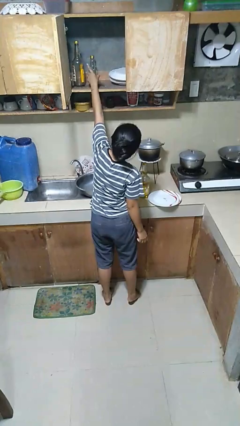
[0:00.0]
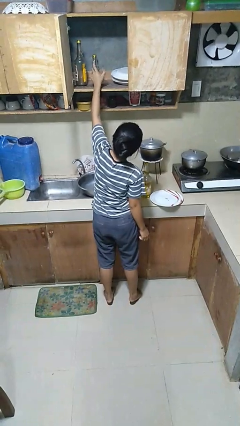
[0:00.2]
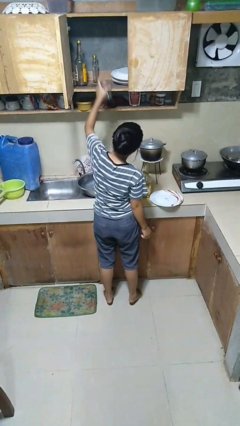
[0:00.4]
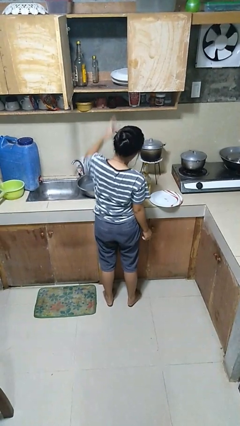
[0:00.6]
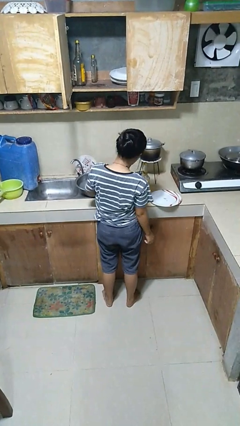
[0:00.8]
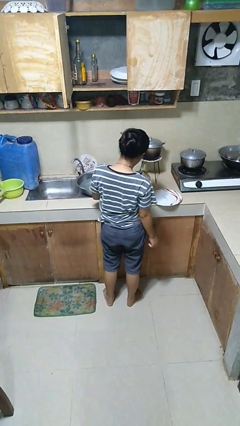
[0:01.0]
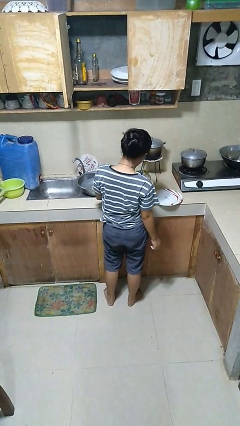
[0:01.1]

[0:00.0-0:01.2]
person takes object from cabinet

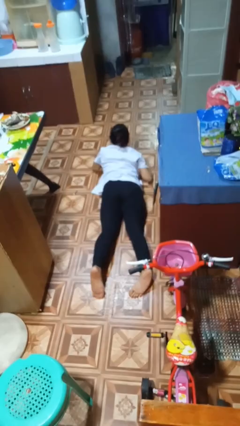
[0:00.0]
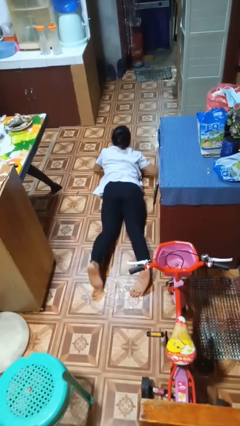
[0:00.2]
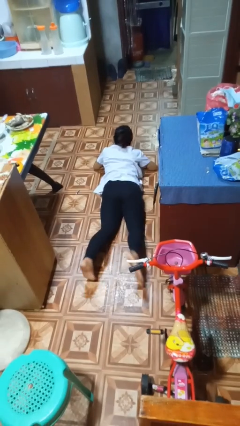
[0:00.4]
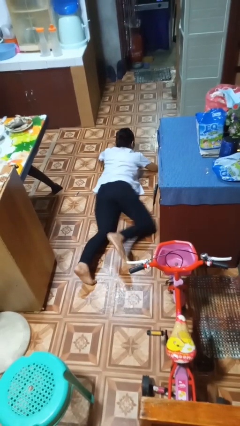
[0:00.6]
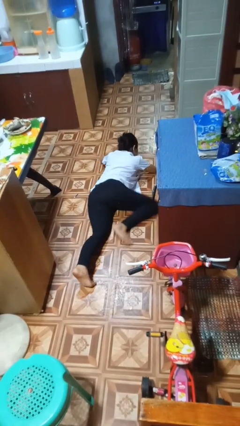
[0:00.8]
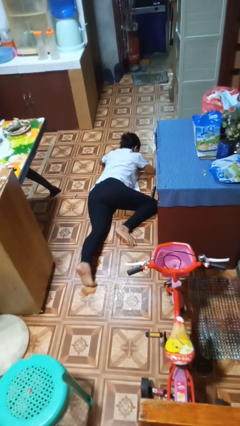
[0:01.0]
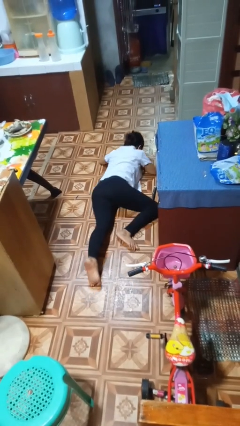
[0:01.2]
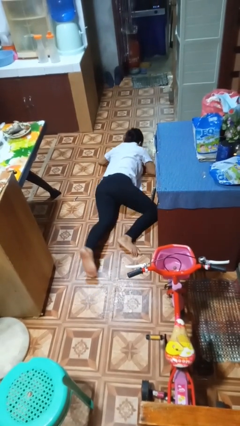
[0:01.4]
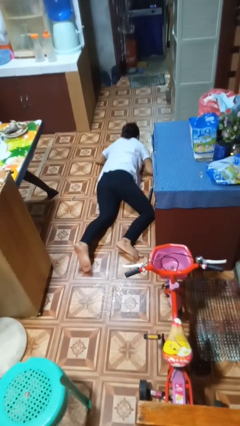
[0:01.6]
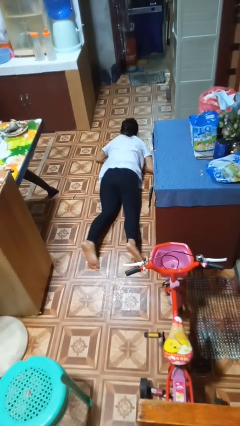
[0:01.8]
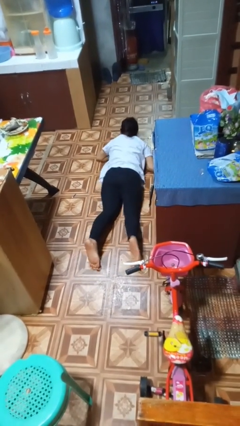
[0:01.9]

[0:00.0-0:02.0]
person crawls

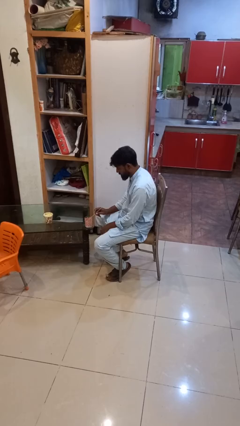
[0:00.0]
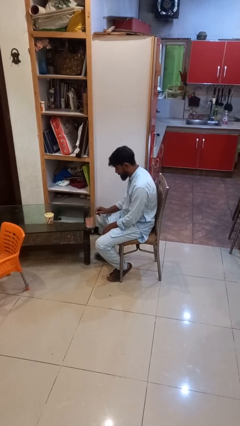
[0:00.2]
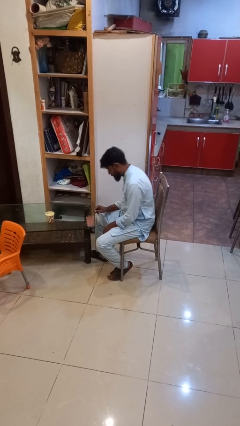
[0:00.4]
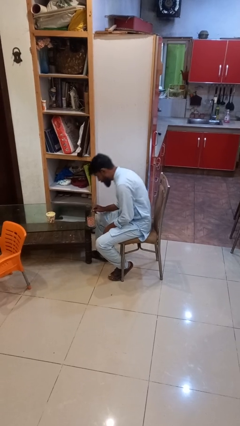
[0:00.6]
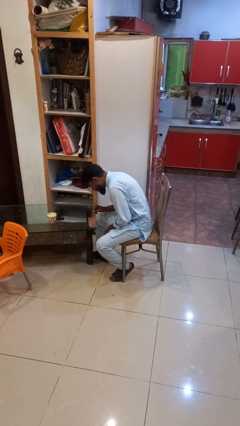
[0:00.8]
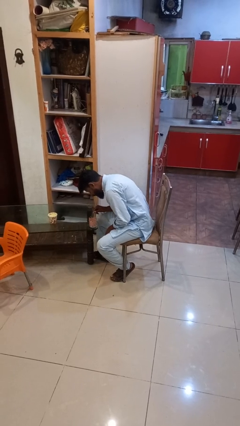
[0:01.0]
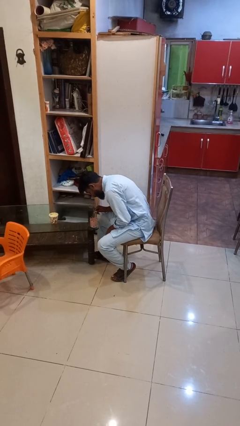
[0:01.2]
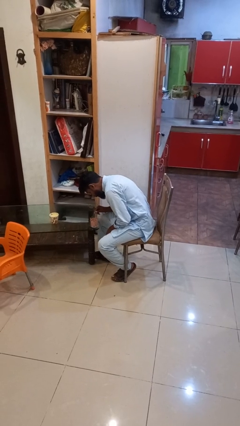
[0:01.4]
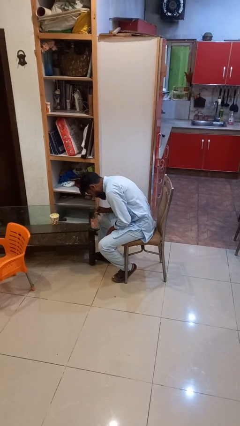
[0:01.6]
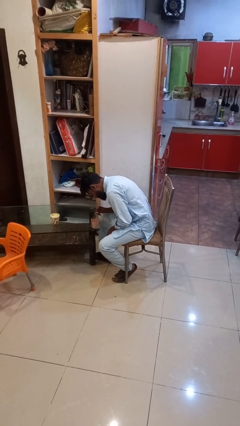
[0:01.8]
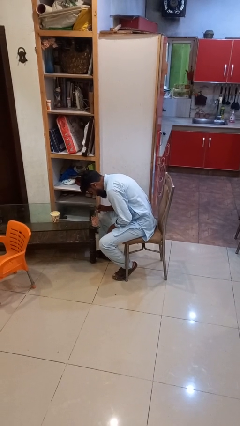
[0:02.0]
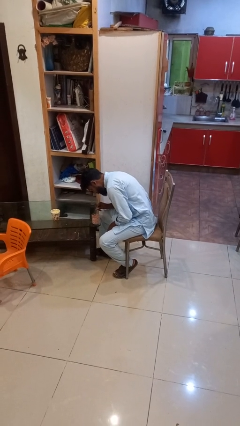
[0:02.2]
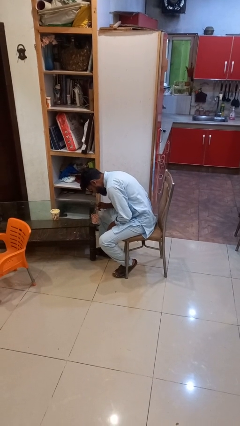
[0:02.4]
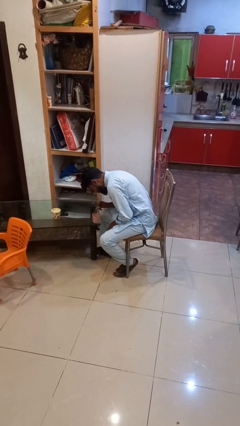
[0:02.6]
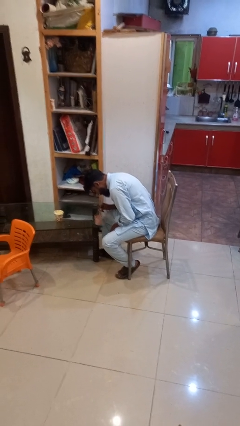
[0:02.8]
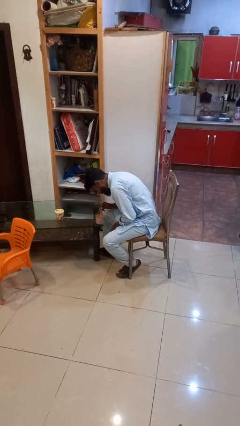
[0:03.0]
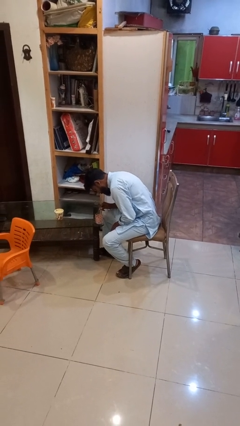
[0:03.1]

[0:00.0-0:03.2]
person drinks from straw

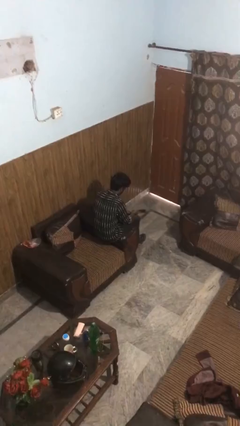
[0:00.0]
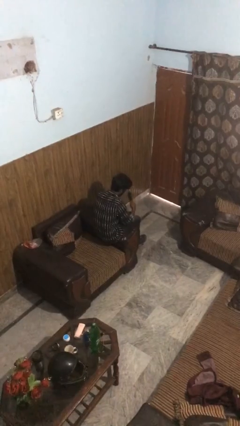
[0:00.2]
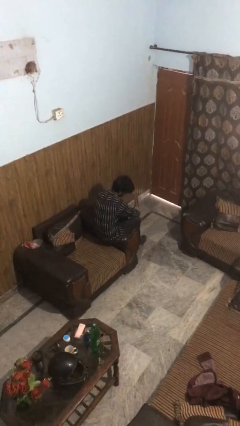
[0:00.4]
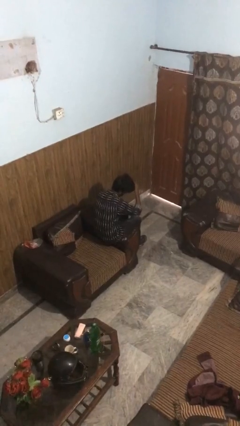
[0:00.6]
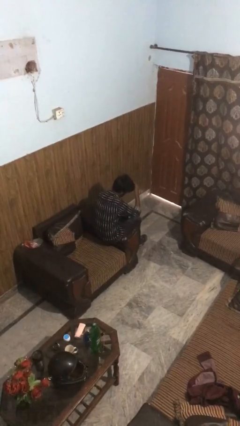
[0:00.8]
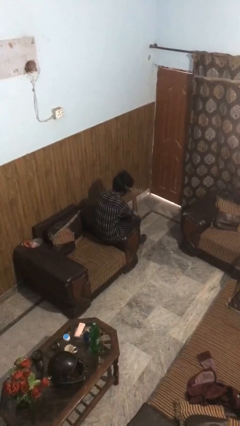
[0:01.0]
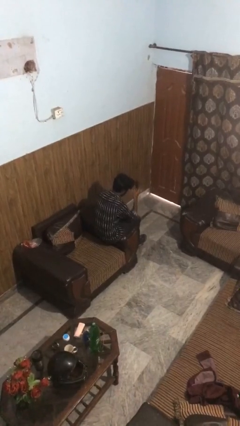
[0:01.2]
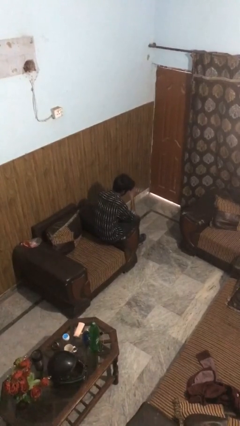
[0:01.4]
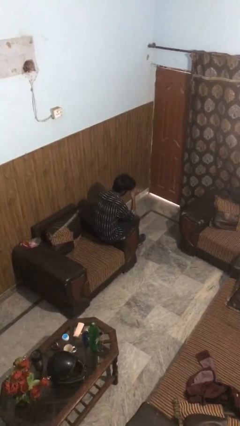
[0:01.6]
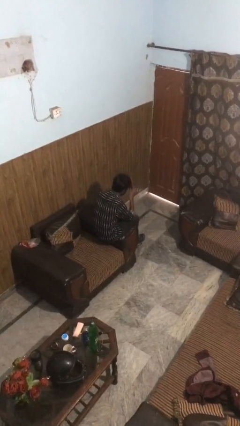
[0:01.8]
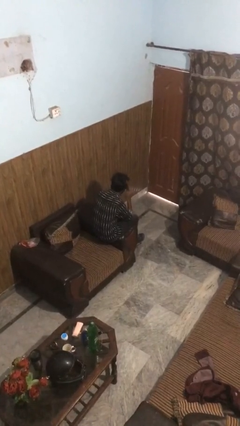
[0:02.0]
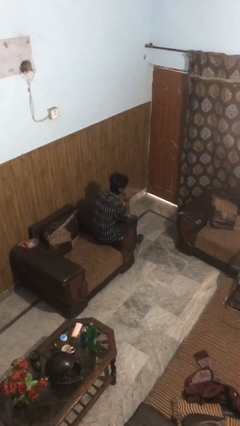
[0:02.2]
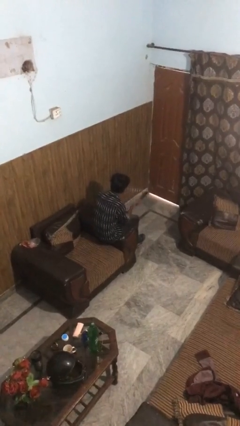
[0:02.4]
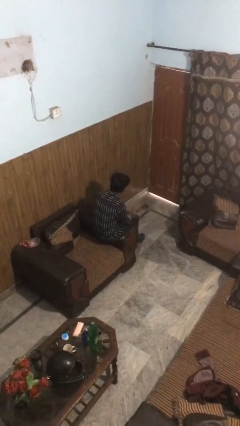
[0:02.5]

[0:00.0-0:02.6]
person brushes hair

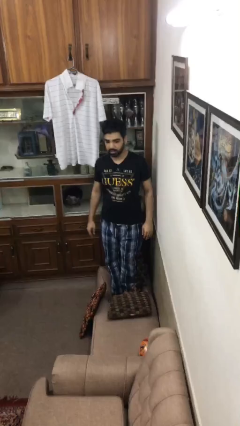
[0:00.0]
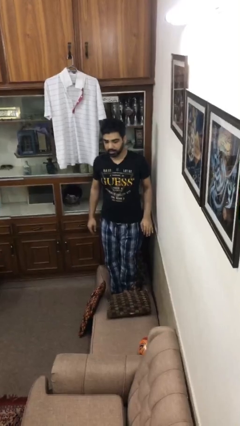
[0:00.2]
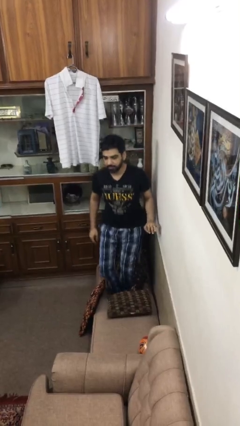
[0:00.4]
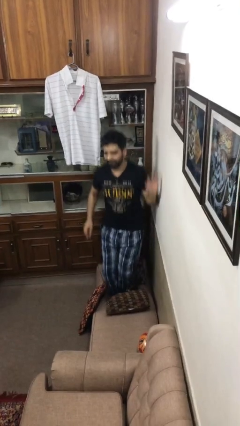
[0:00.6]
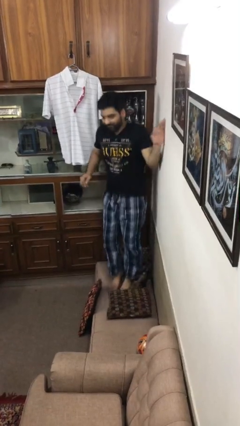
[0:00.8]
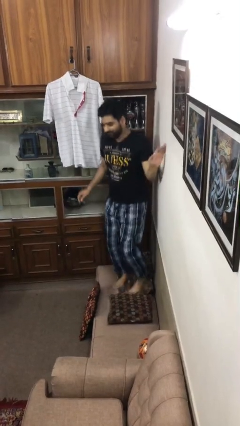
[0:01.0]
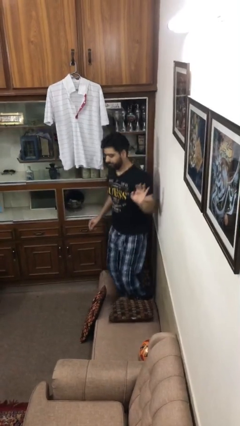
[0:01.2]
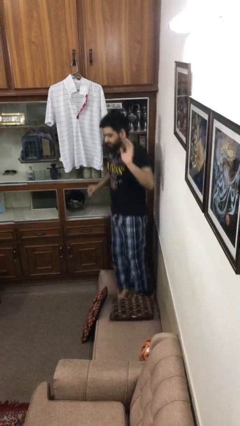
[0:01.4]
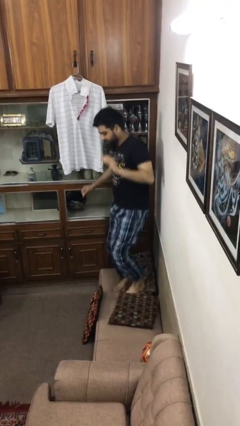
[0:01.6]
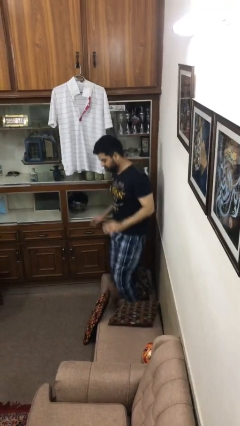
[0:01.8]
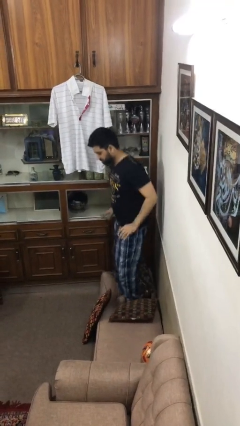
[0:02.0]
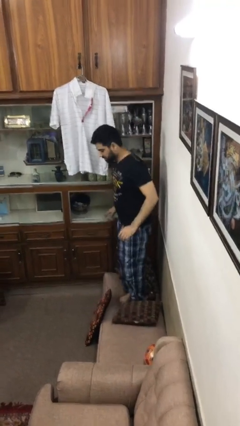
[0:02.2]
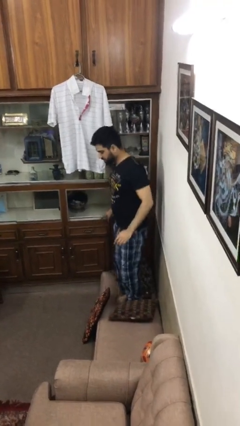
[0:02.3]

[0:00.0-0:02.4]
person jumps on couch

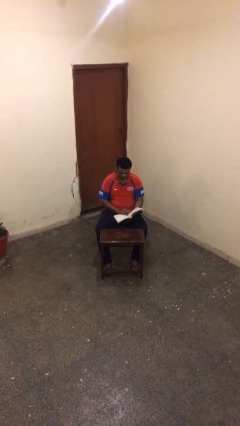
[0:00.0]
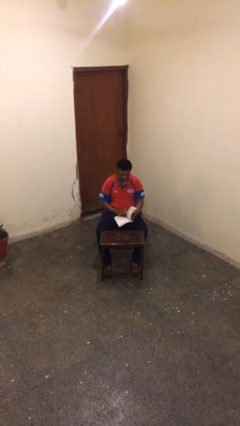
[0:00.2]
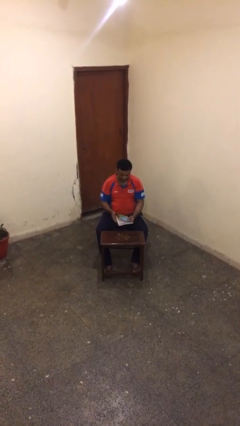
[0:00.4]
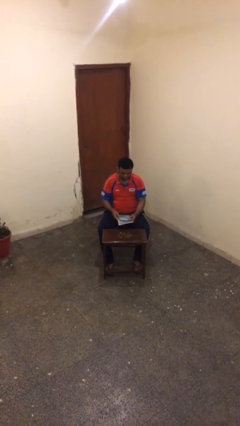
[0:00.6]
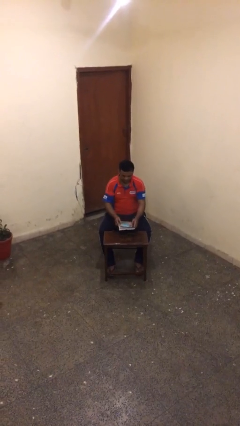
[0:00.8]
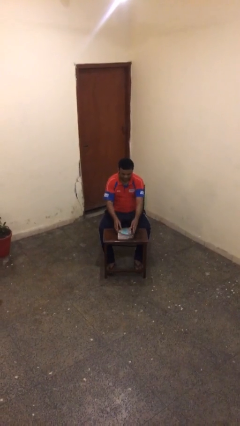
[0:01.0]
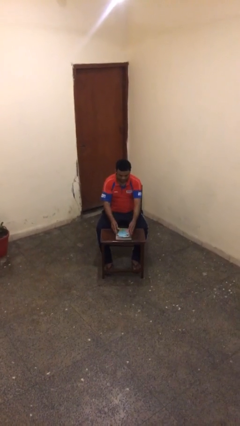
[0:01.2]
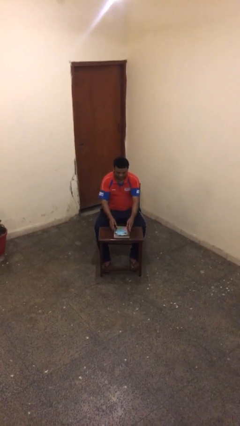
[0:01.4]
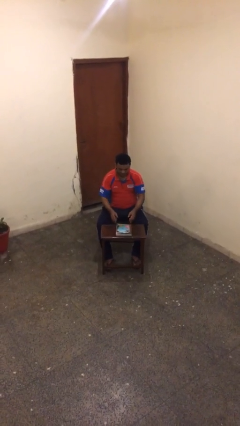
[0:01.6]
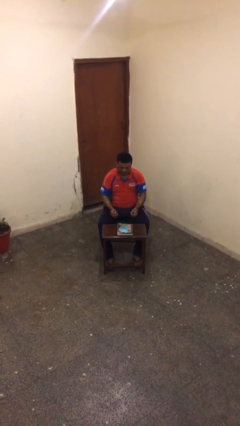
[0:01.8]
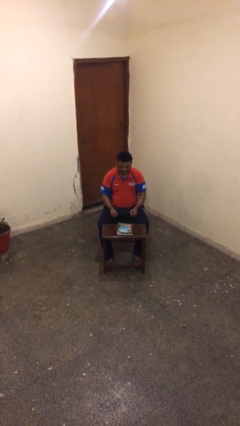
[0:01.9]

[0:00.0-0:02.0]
person puts down object on table

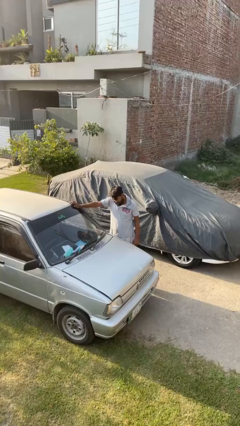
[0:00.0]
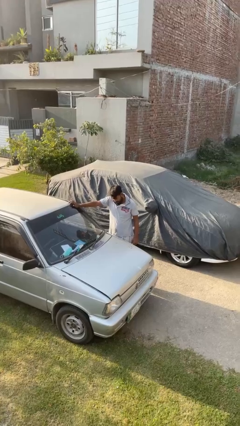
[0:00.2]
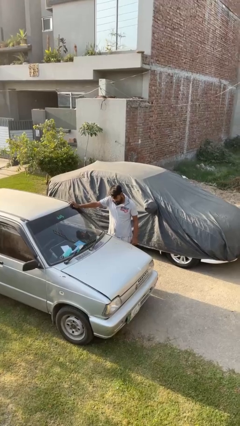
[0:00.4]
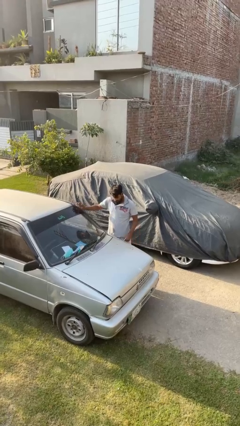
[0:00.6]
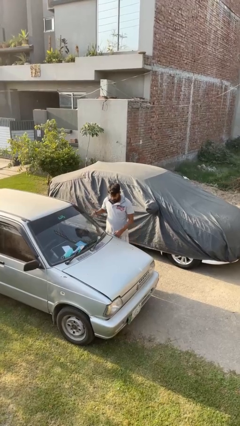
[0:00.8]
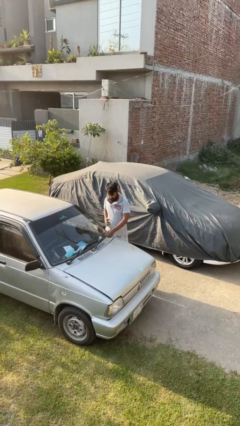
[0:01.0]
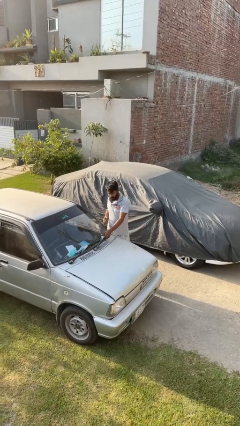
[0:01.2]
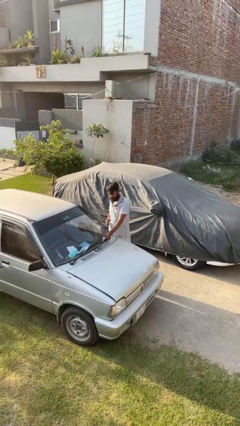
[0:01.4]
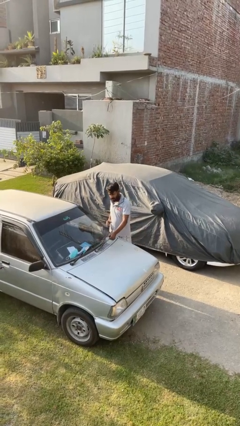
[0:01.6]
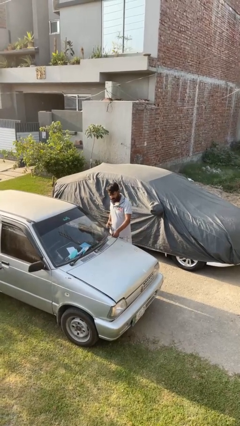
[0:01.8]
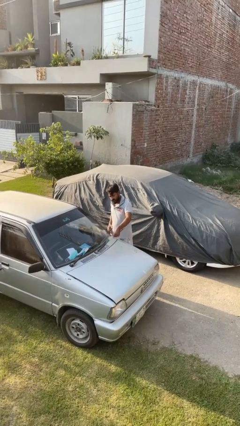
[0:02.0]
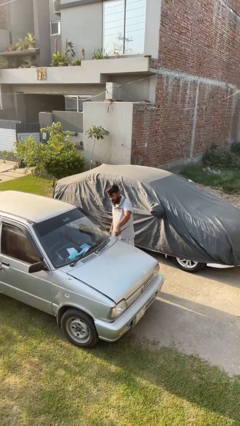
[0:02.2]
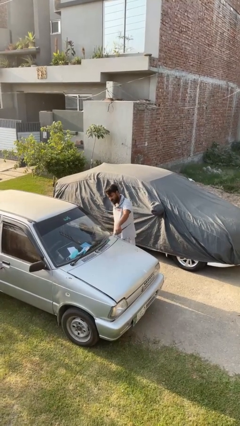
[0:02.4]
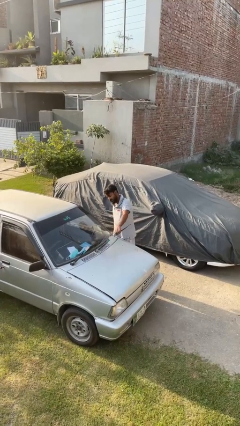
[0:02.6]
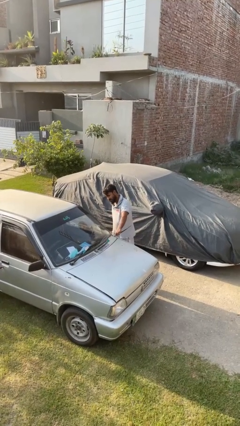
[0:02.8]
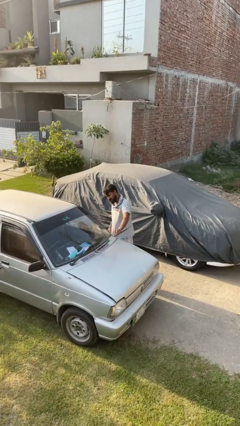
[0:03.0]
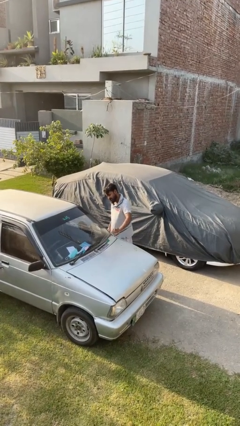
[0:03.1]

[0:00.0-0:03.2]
person flips up car wipers

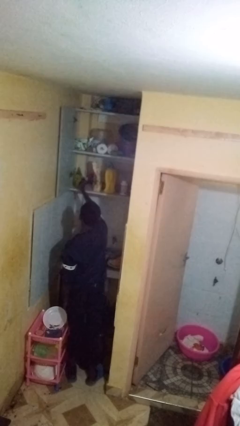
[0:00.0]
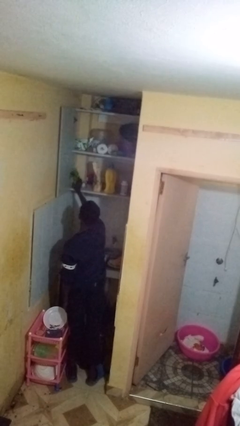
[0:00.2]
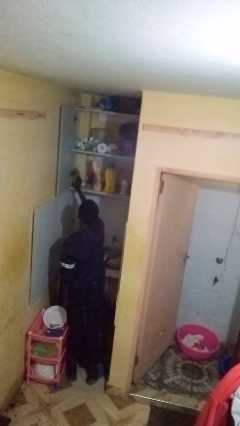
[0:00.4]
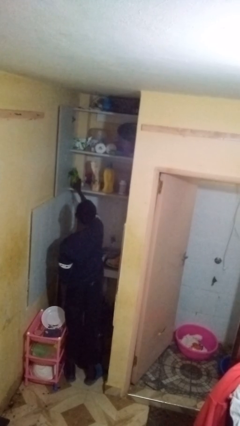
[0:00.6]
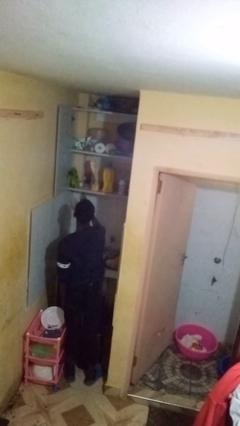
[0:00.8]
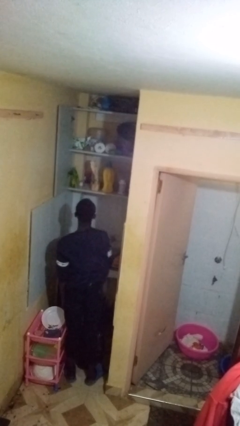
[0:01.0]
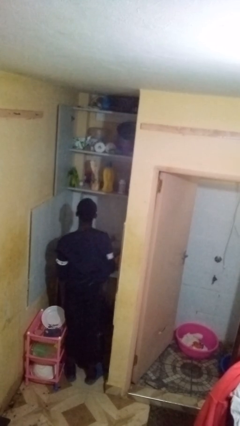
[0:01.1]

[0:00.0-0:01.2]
person puts object in cabinet
